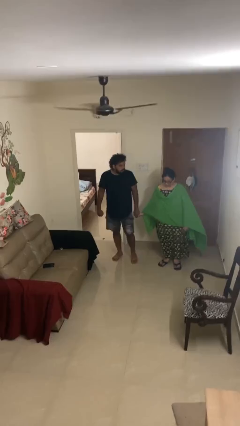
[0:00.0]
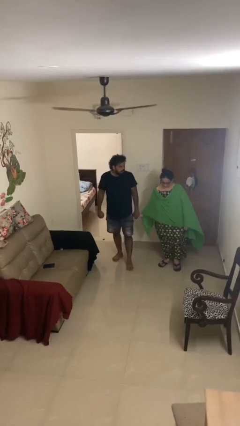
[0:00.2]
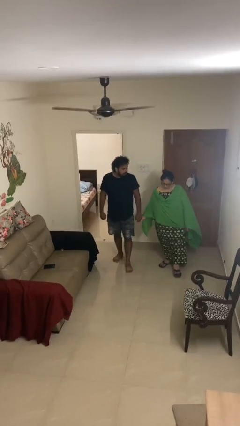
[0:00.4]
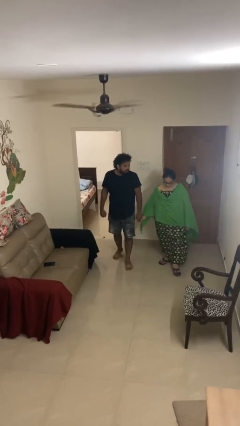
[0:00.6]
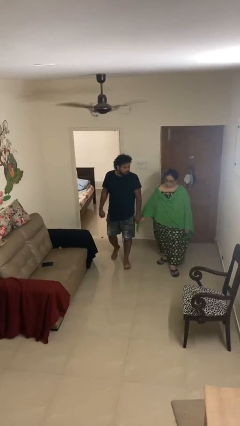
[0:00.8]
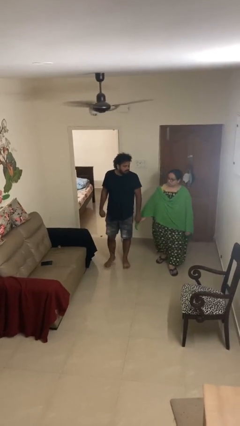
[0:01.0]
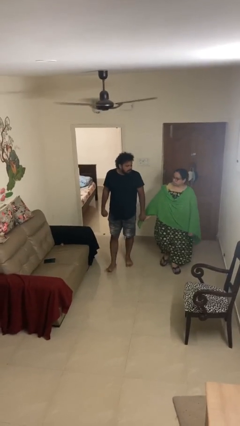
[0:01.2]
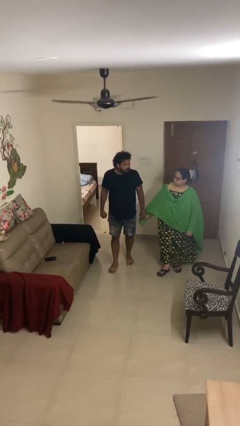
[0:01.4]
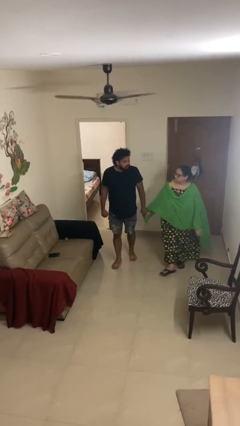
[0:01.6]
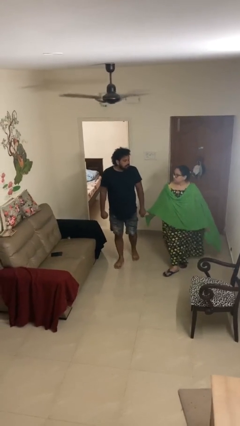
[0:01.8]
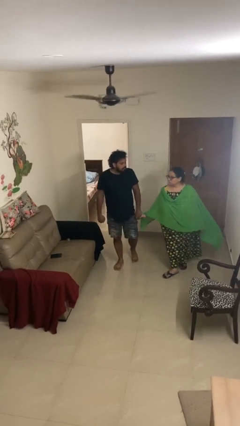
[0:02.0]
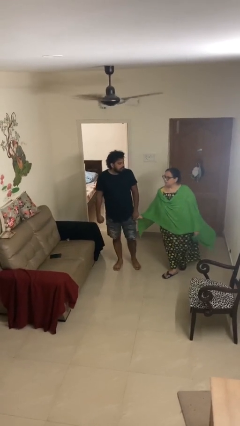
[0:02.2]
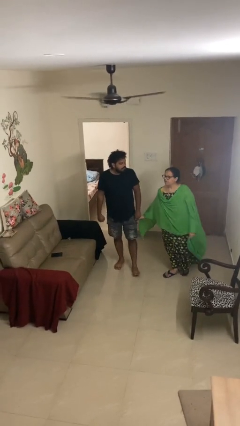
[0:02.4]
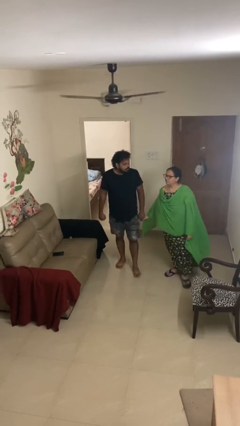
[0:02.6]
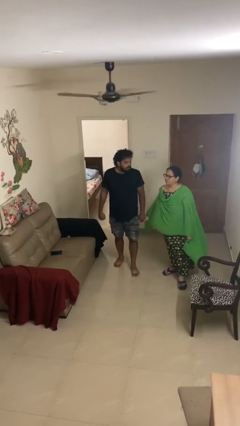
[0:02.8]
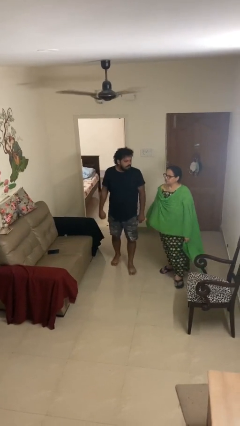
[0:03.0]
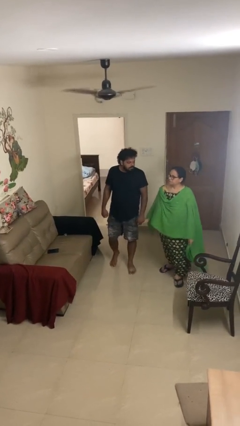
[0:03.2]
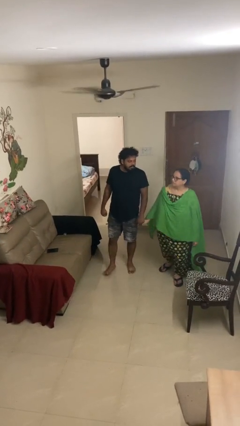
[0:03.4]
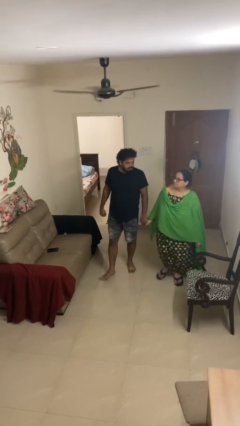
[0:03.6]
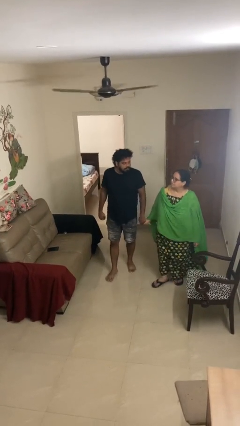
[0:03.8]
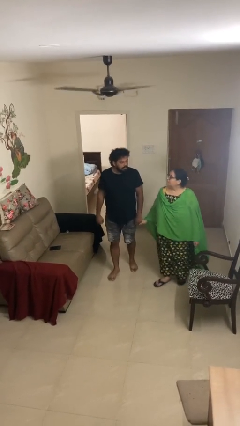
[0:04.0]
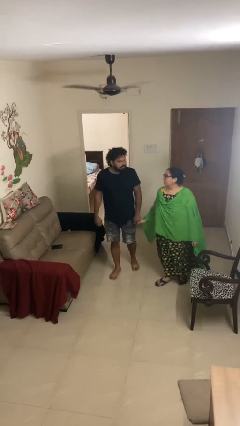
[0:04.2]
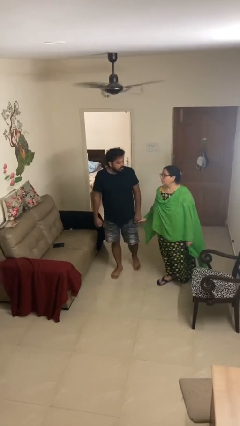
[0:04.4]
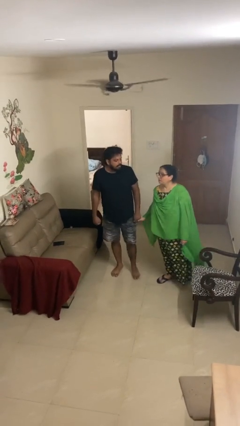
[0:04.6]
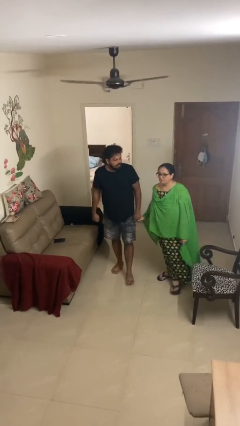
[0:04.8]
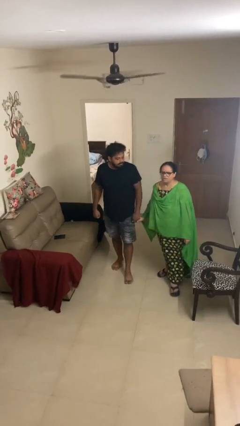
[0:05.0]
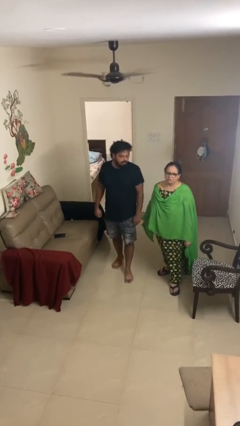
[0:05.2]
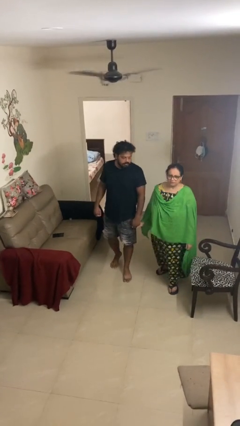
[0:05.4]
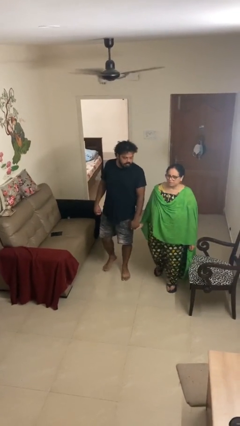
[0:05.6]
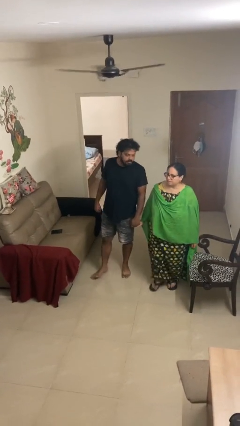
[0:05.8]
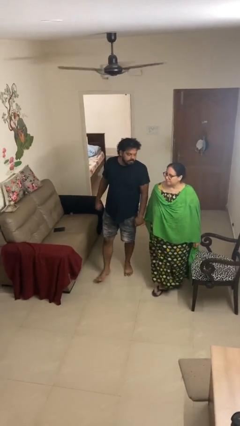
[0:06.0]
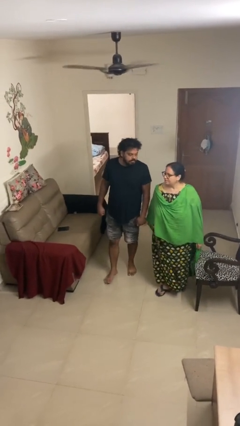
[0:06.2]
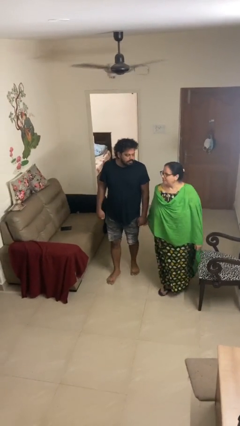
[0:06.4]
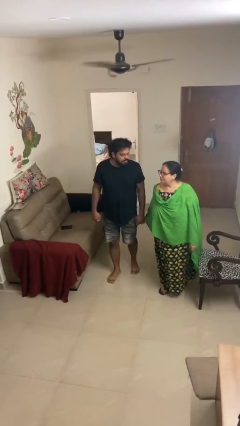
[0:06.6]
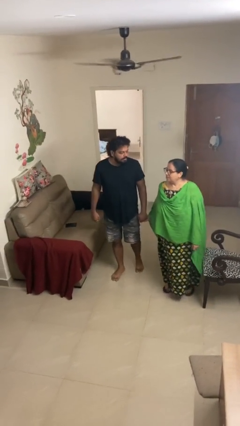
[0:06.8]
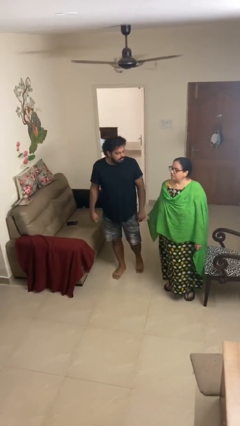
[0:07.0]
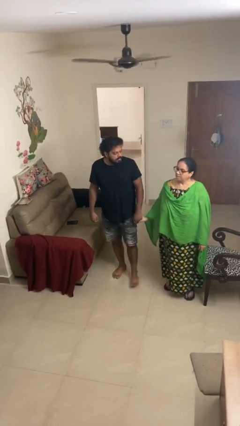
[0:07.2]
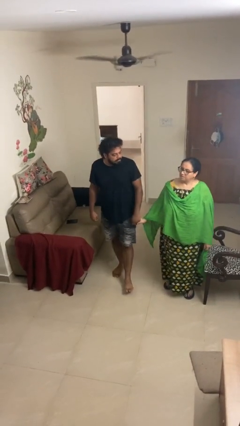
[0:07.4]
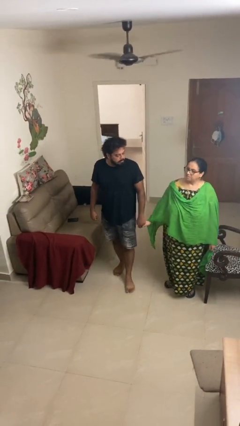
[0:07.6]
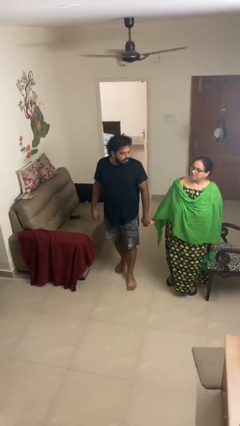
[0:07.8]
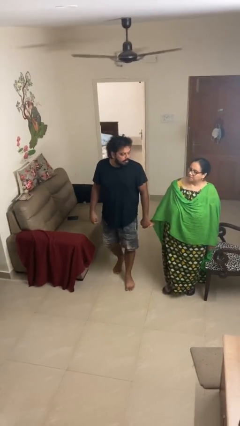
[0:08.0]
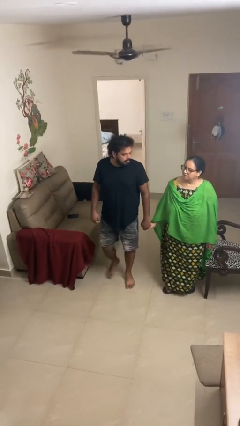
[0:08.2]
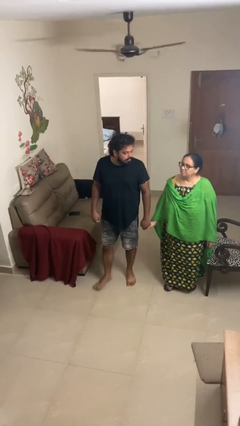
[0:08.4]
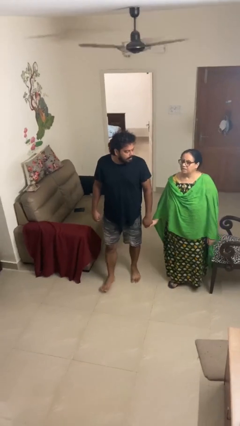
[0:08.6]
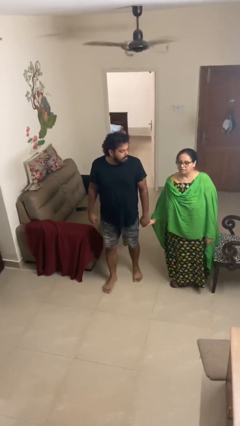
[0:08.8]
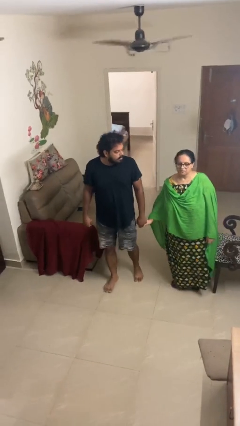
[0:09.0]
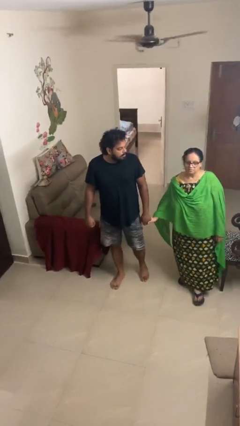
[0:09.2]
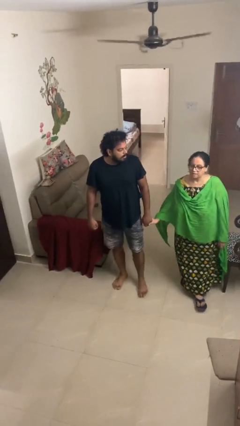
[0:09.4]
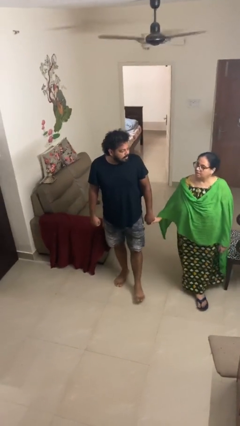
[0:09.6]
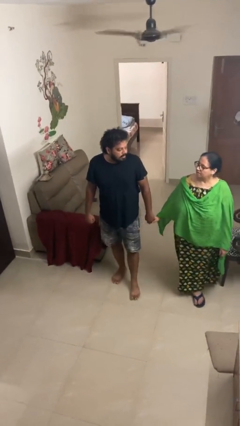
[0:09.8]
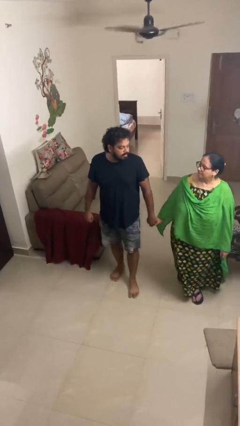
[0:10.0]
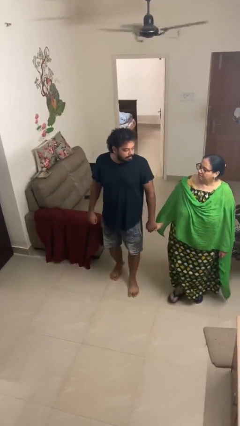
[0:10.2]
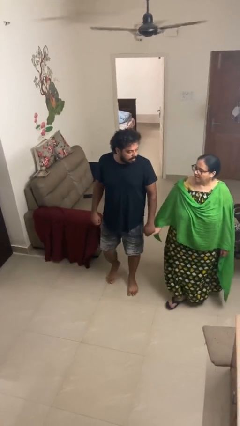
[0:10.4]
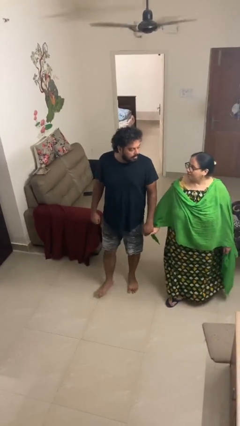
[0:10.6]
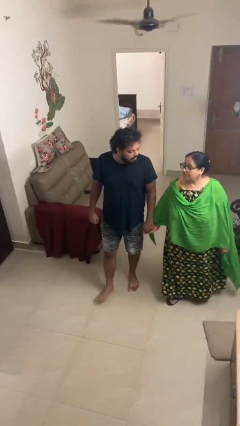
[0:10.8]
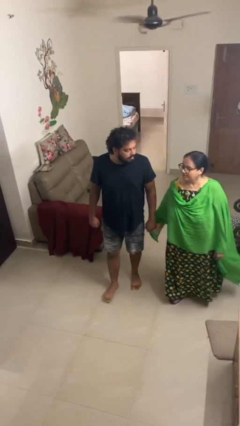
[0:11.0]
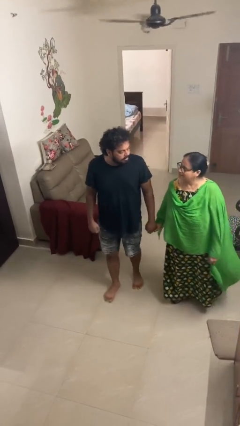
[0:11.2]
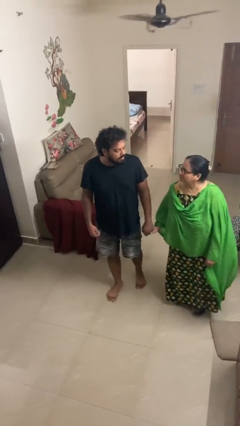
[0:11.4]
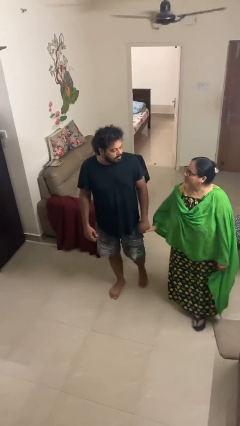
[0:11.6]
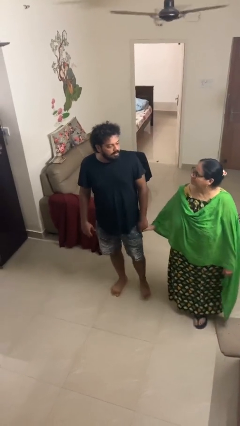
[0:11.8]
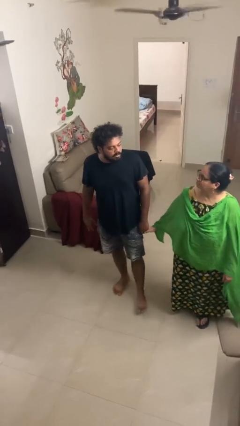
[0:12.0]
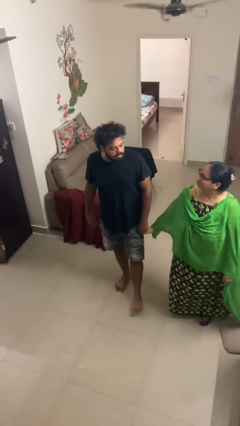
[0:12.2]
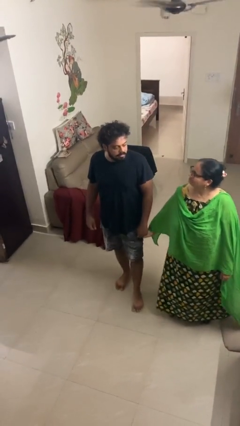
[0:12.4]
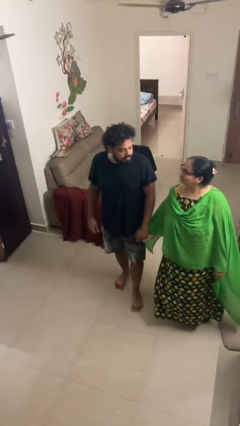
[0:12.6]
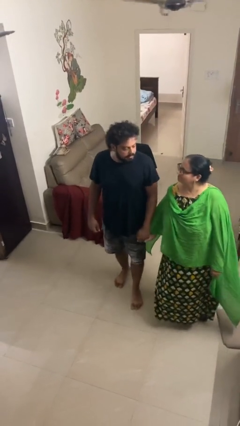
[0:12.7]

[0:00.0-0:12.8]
person holds hand

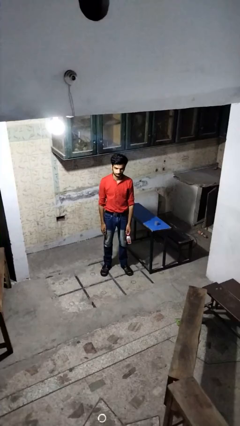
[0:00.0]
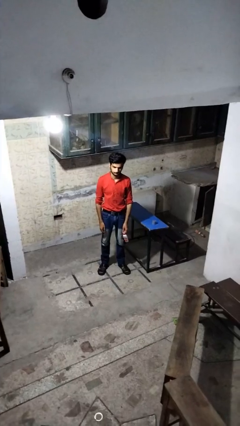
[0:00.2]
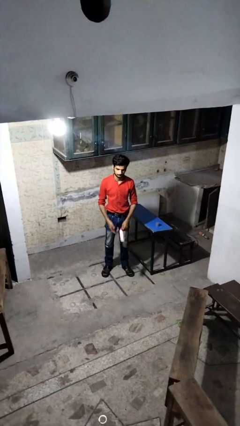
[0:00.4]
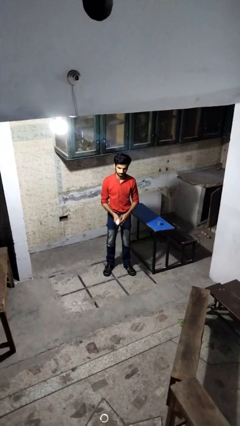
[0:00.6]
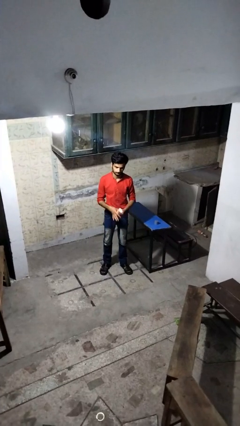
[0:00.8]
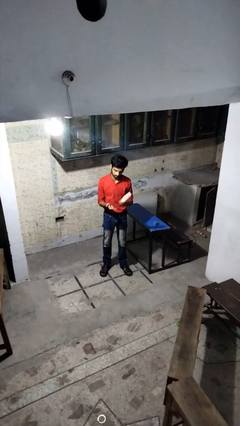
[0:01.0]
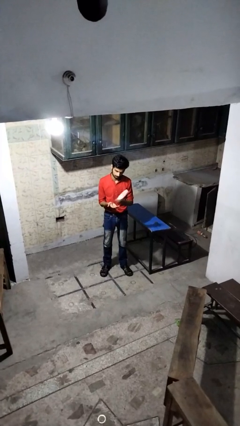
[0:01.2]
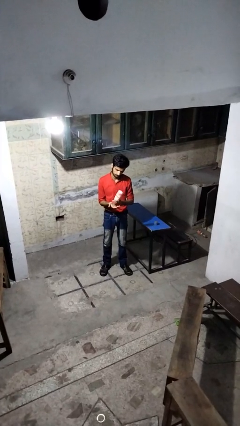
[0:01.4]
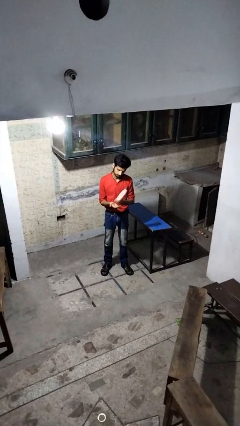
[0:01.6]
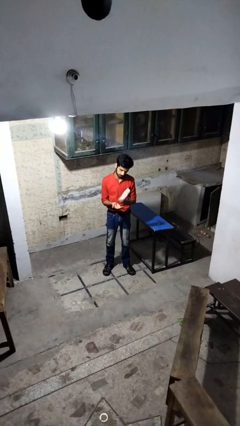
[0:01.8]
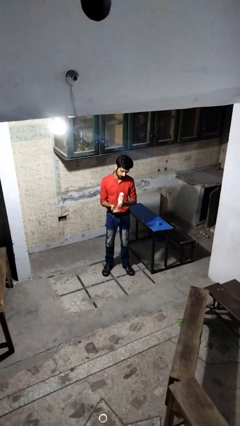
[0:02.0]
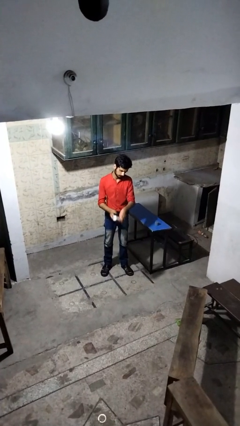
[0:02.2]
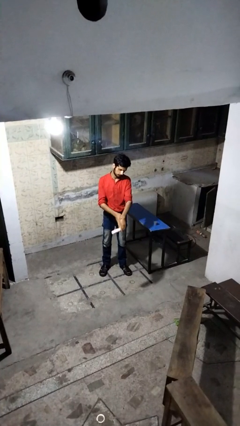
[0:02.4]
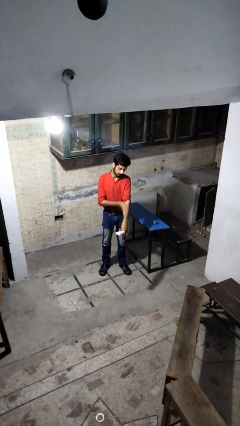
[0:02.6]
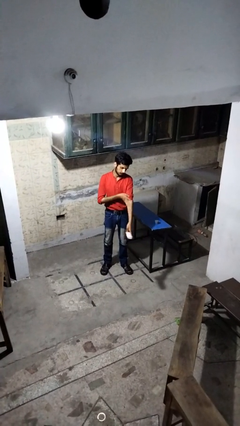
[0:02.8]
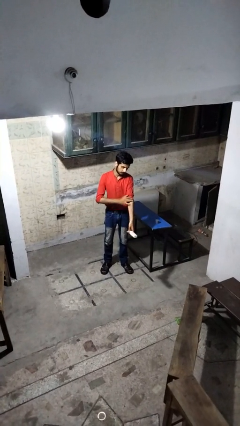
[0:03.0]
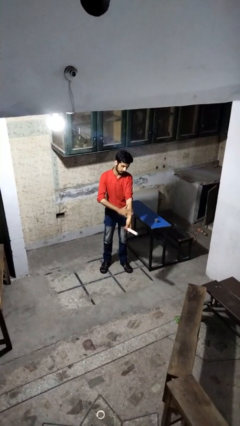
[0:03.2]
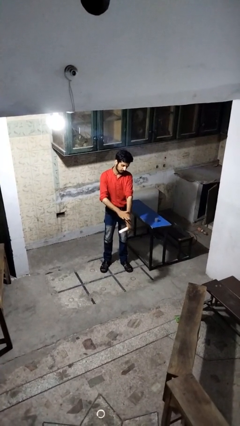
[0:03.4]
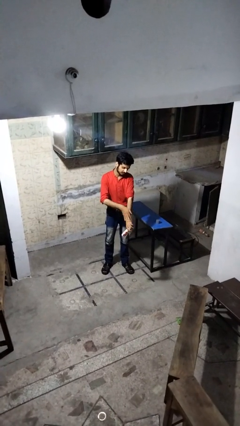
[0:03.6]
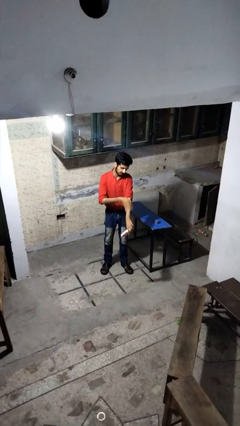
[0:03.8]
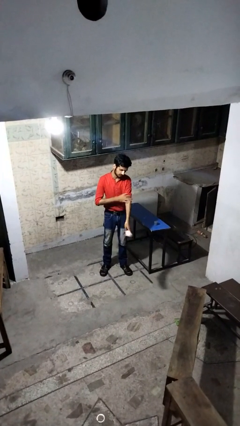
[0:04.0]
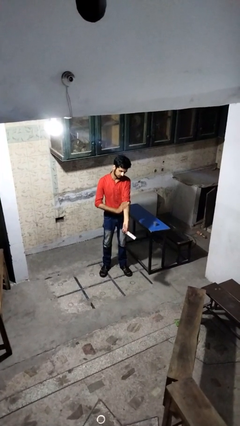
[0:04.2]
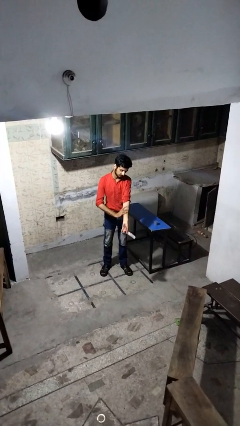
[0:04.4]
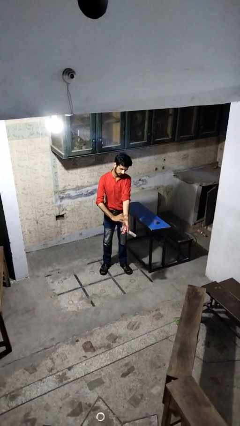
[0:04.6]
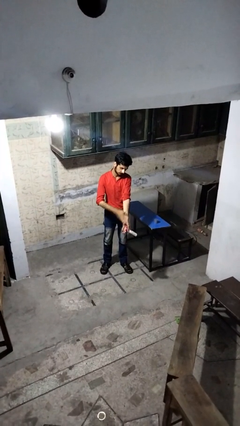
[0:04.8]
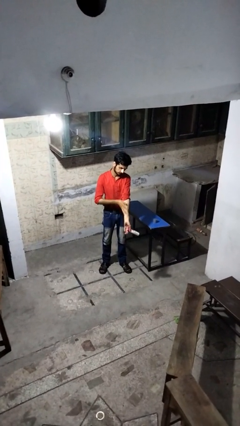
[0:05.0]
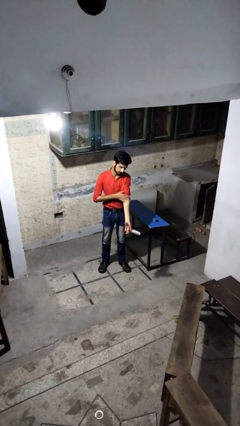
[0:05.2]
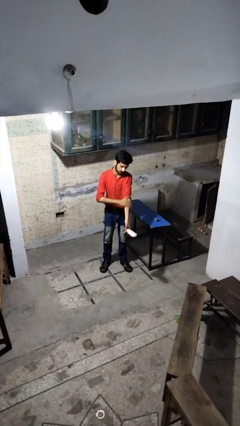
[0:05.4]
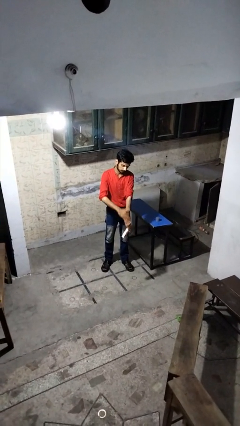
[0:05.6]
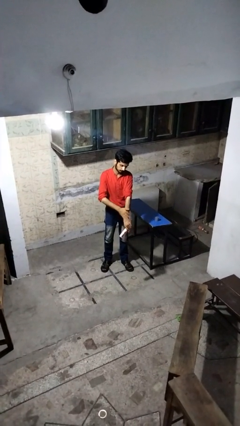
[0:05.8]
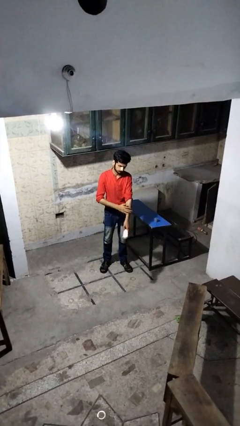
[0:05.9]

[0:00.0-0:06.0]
person applies sunscreen
